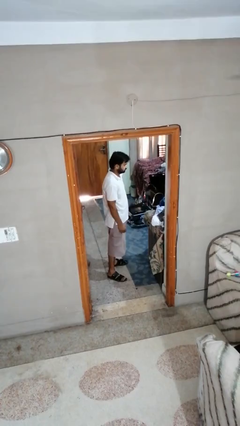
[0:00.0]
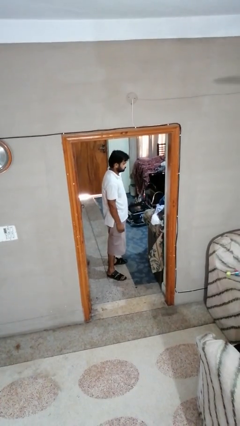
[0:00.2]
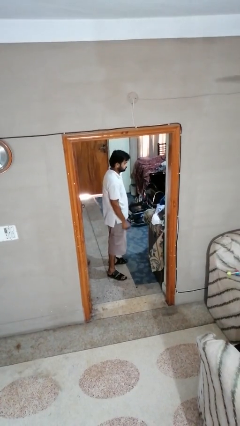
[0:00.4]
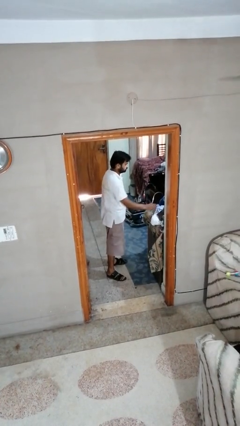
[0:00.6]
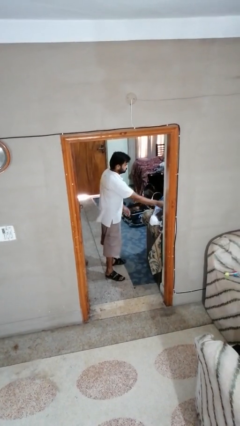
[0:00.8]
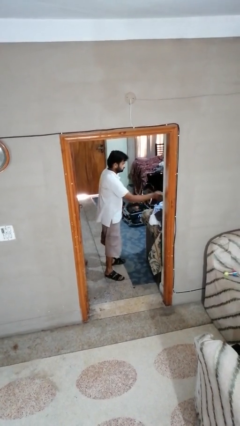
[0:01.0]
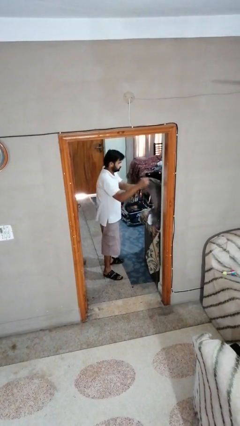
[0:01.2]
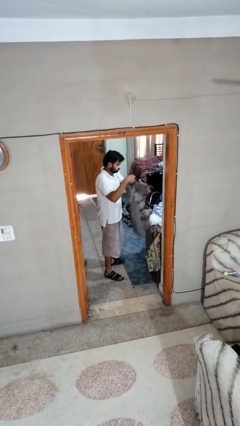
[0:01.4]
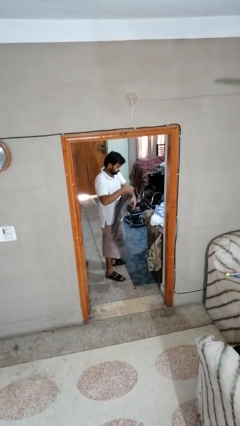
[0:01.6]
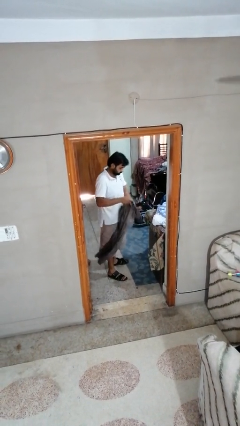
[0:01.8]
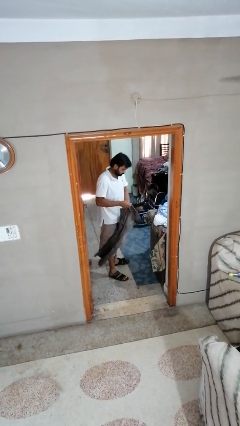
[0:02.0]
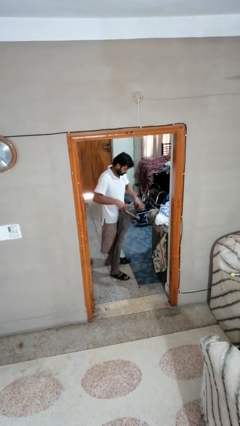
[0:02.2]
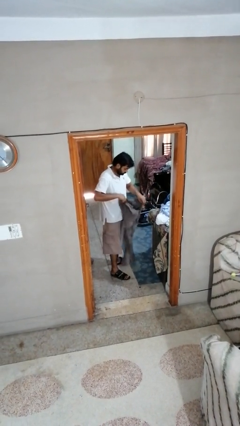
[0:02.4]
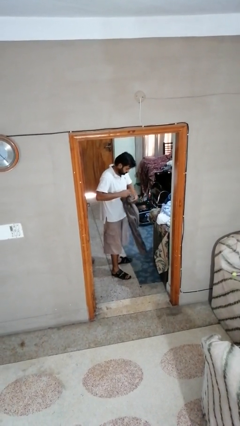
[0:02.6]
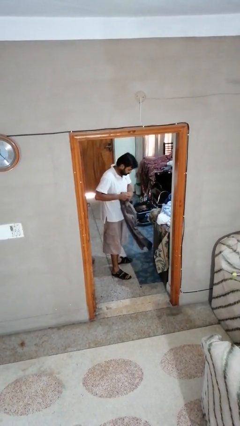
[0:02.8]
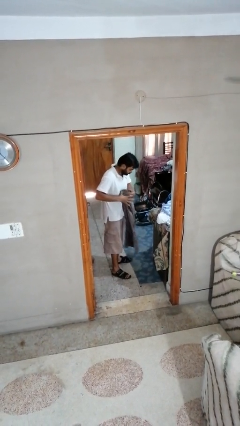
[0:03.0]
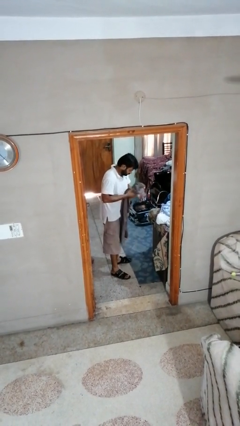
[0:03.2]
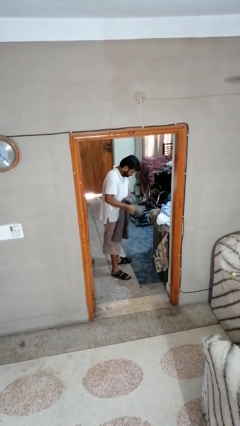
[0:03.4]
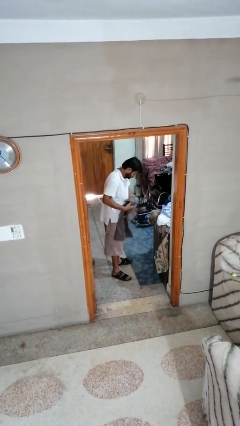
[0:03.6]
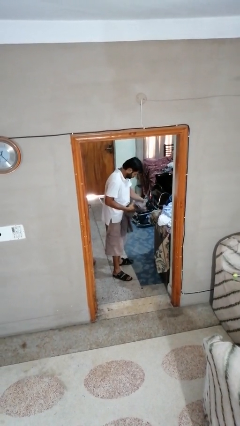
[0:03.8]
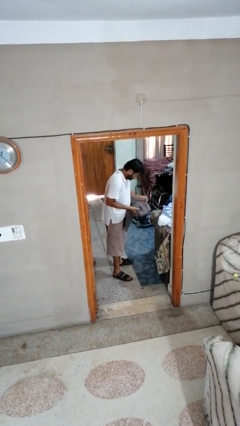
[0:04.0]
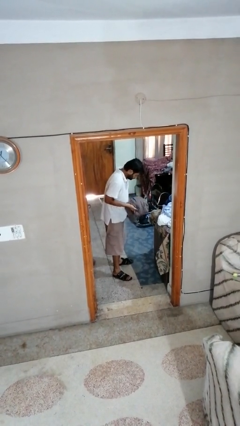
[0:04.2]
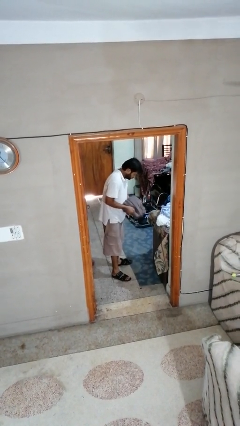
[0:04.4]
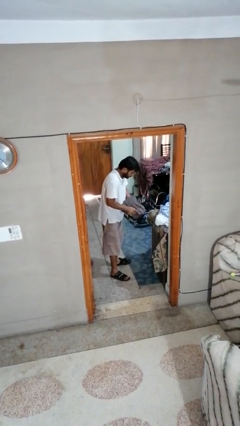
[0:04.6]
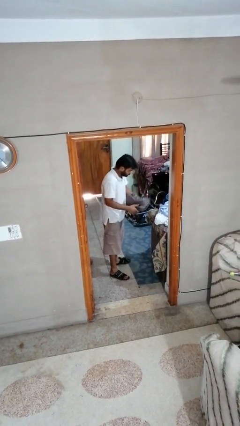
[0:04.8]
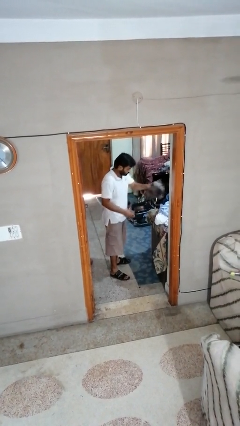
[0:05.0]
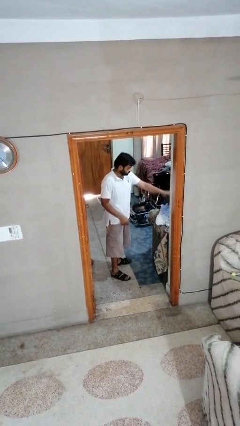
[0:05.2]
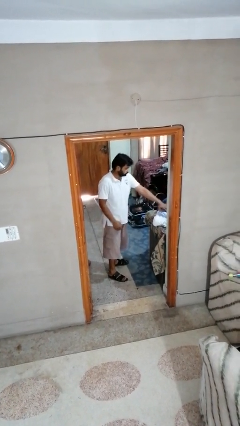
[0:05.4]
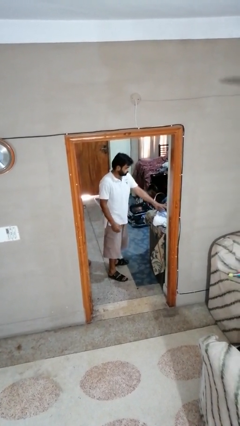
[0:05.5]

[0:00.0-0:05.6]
person folds pants

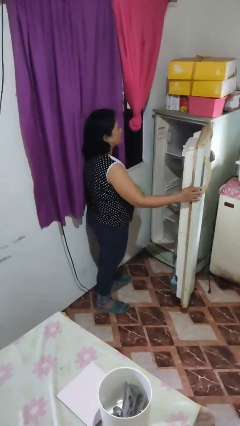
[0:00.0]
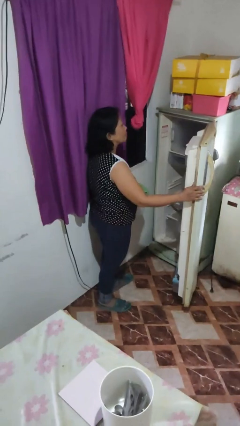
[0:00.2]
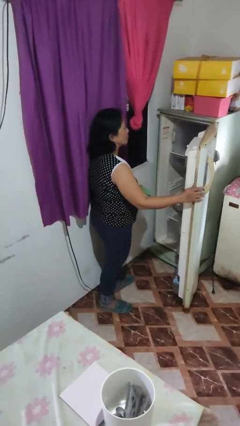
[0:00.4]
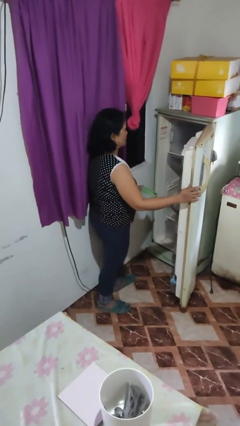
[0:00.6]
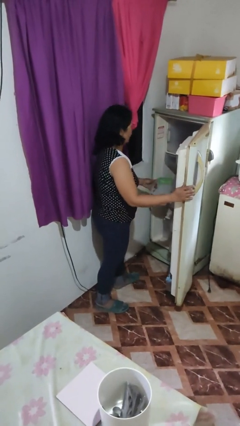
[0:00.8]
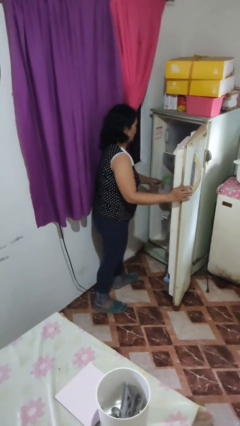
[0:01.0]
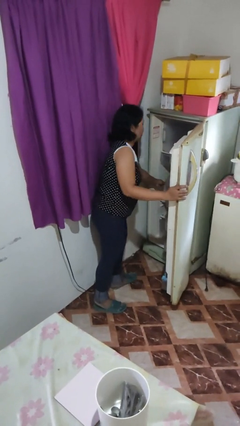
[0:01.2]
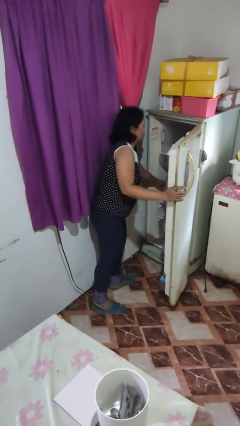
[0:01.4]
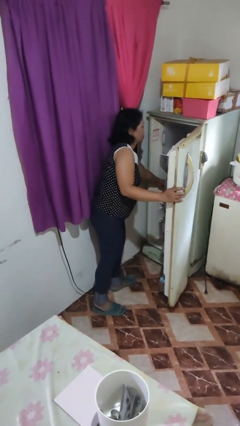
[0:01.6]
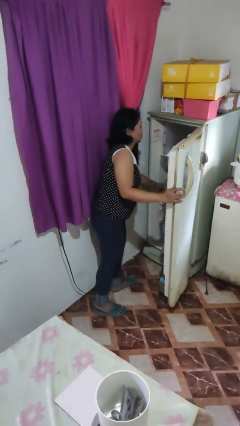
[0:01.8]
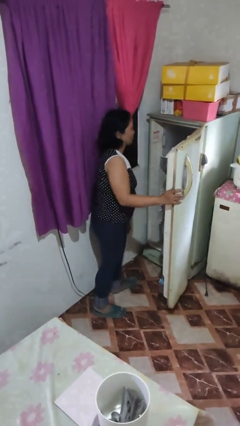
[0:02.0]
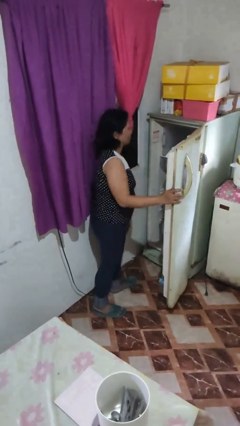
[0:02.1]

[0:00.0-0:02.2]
person puts object into refrigerator

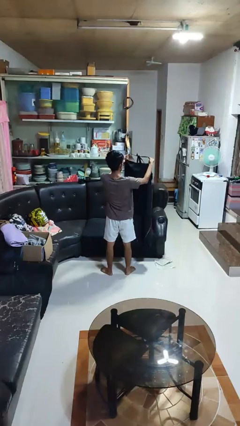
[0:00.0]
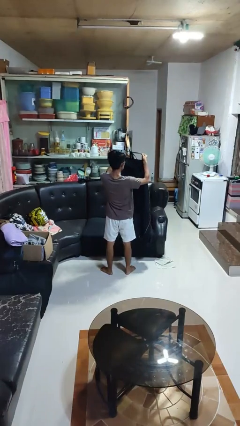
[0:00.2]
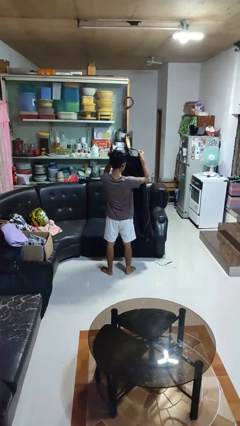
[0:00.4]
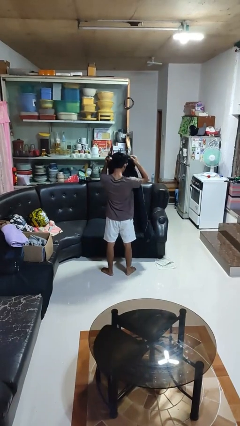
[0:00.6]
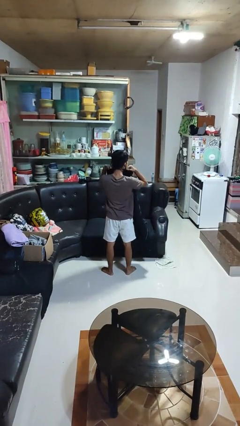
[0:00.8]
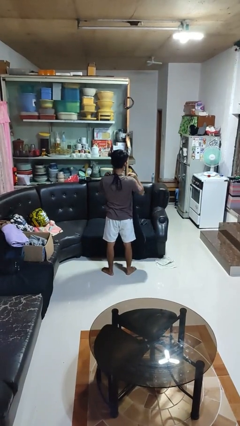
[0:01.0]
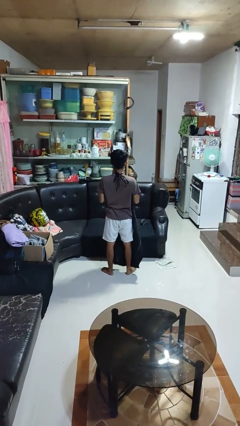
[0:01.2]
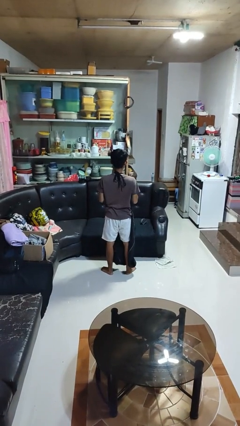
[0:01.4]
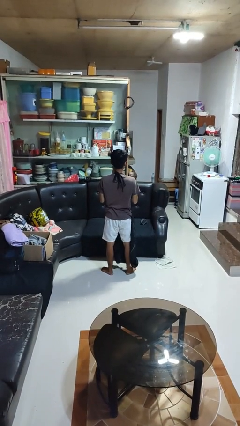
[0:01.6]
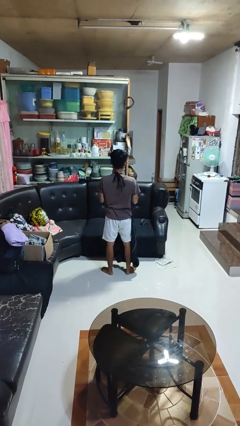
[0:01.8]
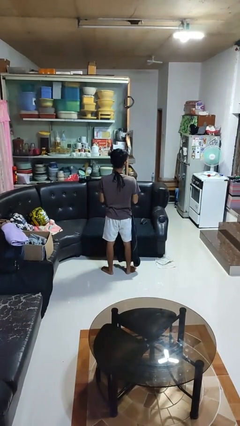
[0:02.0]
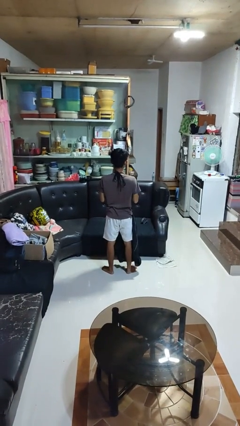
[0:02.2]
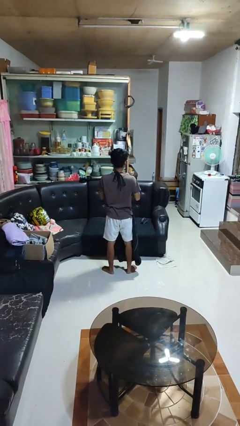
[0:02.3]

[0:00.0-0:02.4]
person puts on apron

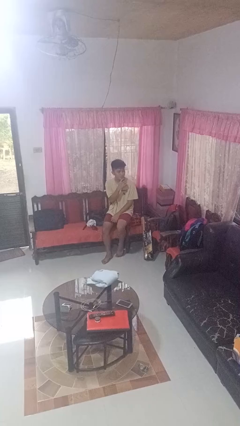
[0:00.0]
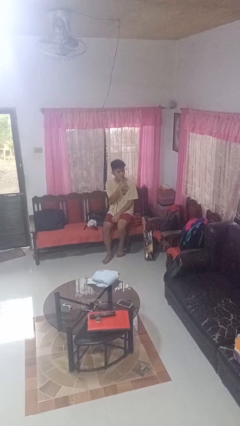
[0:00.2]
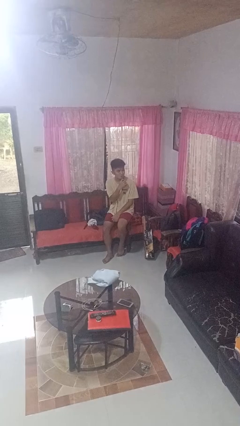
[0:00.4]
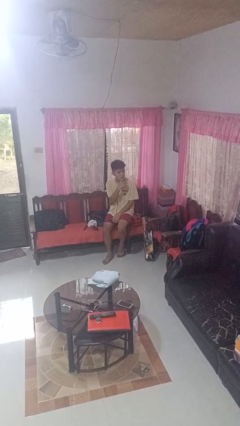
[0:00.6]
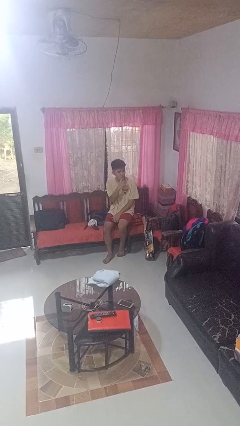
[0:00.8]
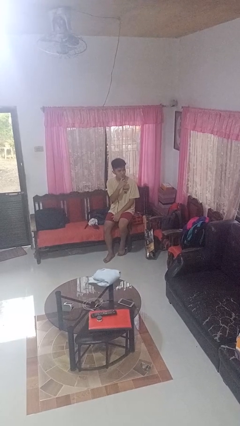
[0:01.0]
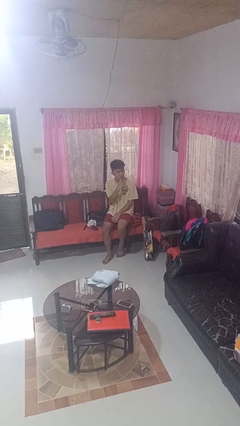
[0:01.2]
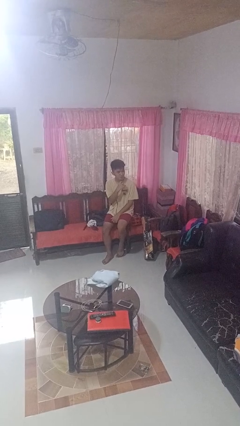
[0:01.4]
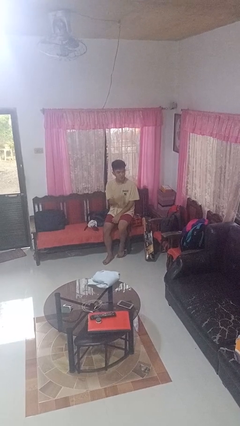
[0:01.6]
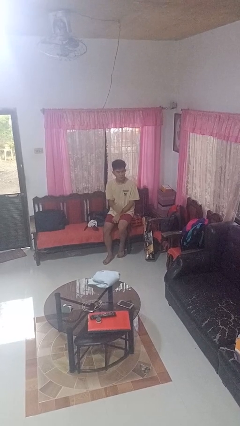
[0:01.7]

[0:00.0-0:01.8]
person strokes chin

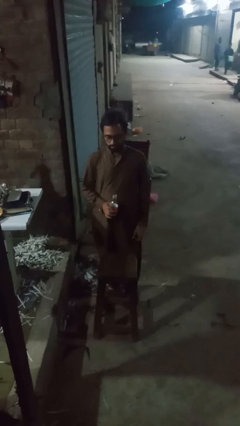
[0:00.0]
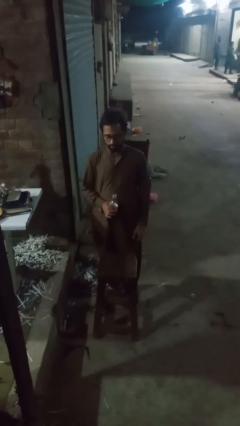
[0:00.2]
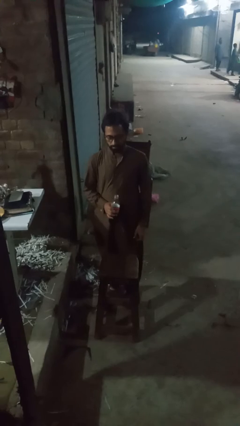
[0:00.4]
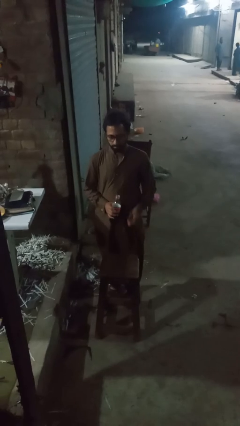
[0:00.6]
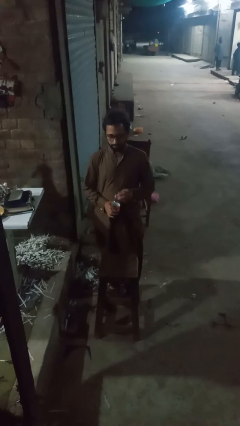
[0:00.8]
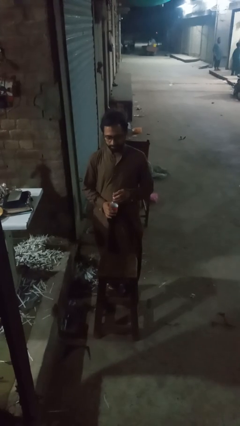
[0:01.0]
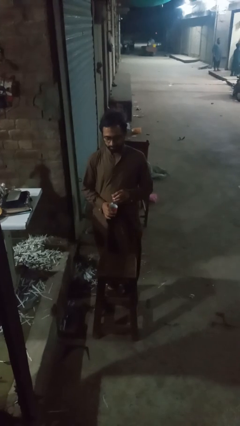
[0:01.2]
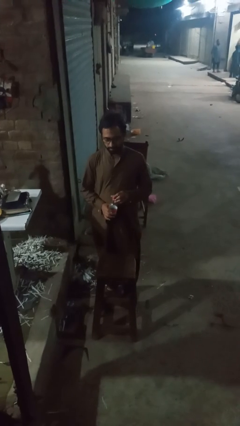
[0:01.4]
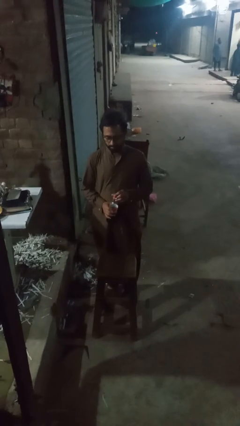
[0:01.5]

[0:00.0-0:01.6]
person screws lid to bottle

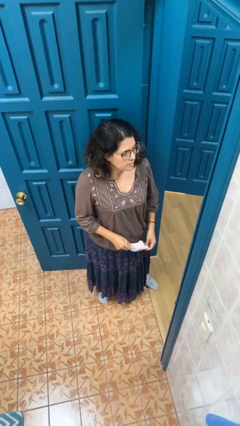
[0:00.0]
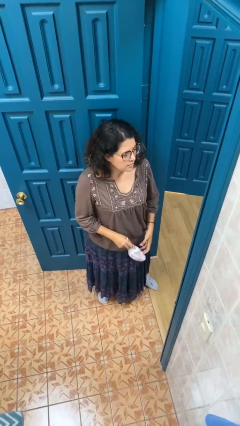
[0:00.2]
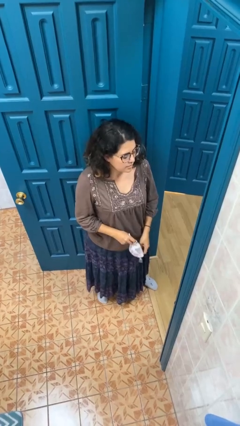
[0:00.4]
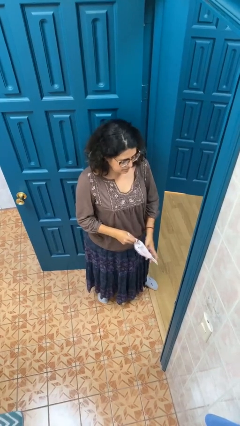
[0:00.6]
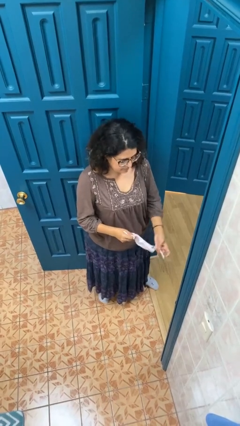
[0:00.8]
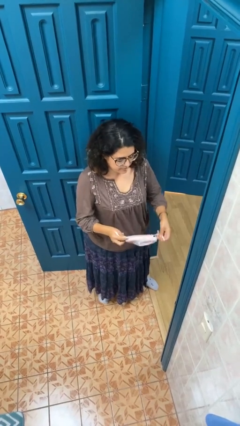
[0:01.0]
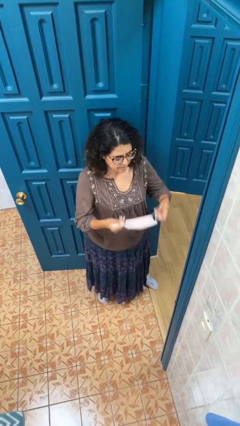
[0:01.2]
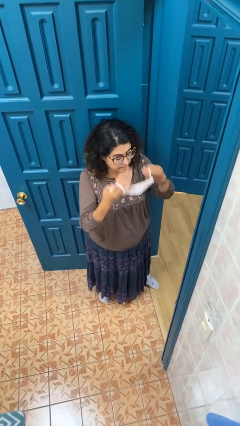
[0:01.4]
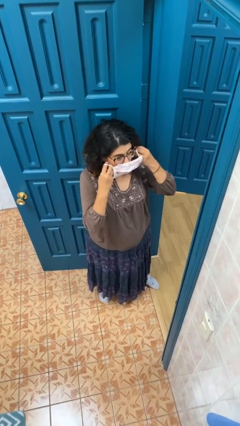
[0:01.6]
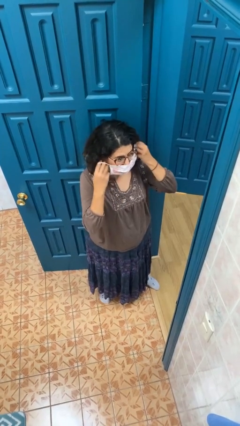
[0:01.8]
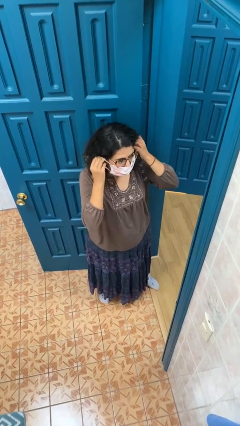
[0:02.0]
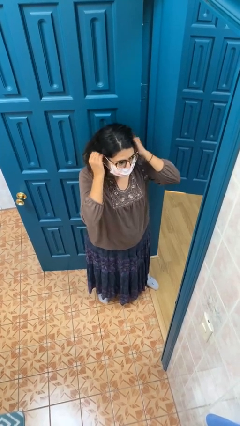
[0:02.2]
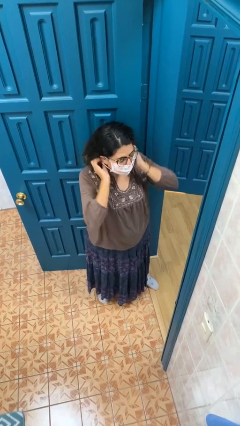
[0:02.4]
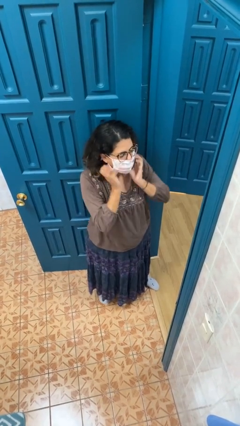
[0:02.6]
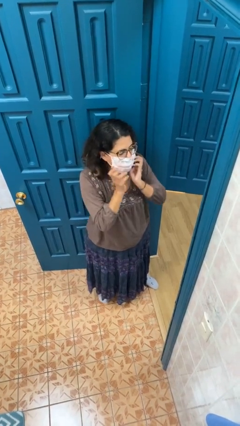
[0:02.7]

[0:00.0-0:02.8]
person puts on facemask

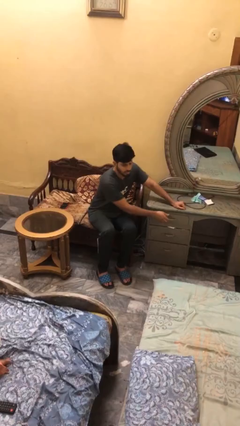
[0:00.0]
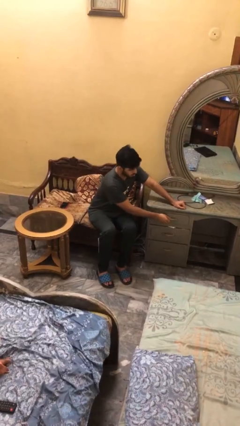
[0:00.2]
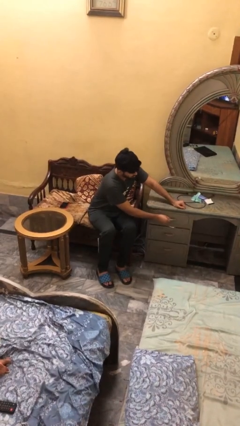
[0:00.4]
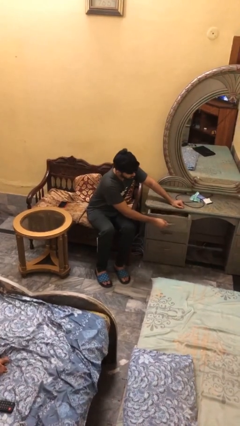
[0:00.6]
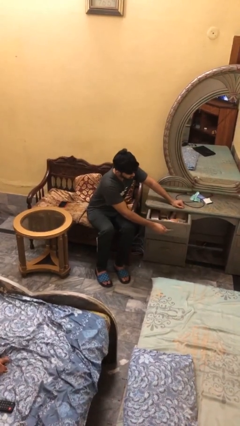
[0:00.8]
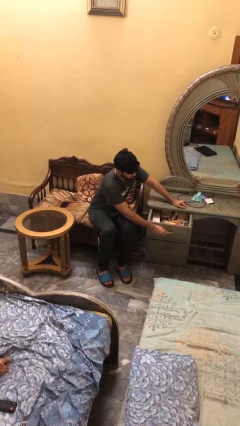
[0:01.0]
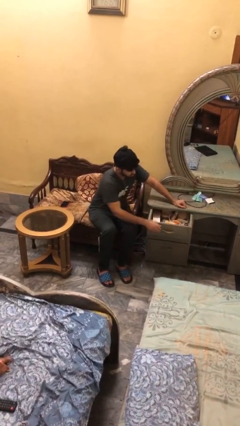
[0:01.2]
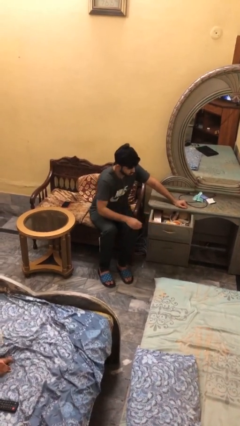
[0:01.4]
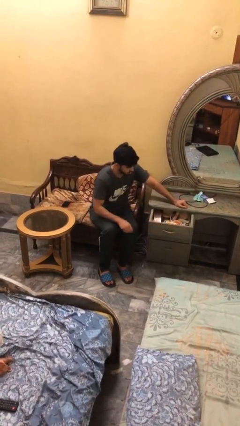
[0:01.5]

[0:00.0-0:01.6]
person opens dresser drawer
